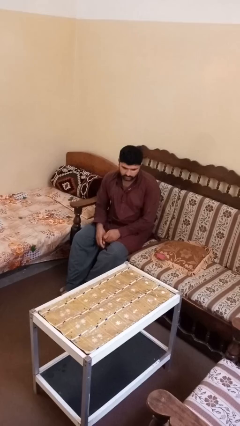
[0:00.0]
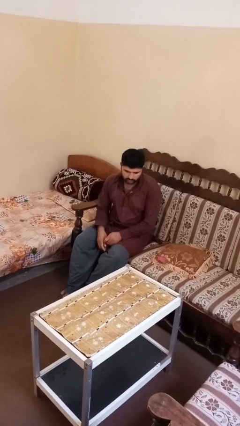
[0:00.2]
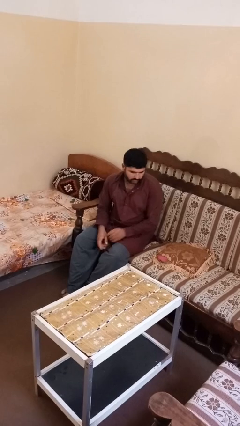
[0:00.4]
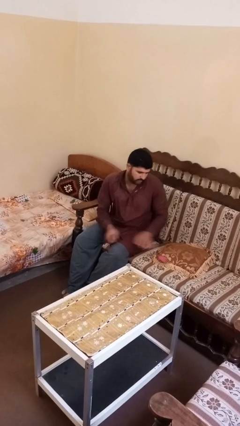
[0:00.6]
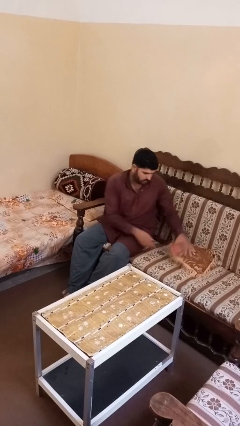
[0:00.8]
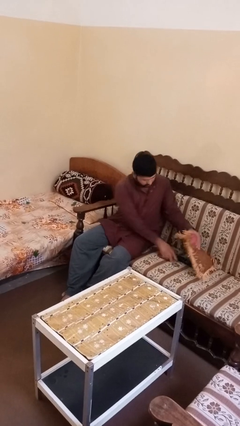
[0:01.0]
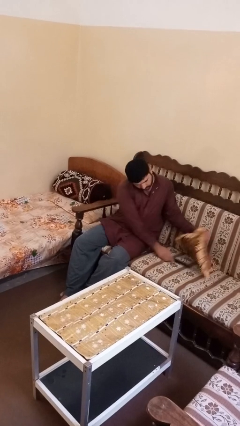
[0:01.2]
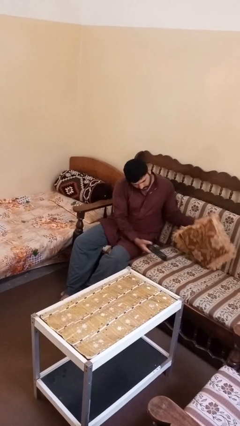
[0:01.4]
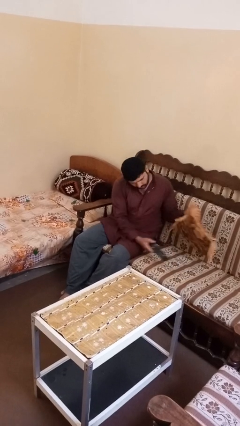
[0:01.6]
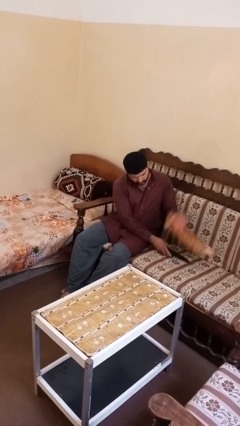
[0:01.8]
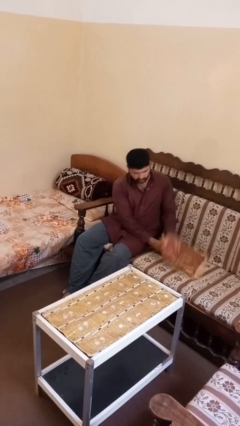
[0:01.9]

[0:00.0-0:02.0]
person searches in couch

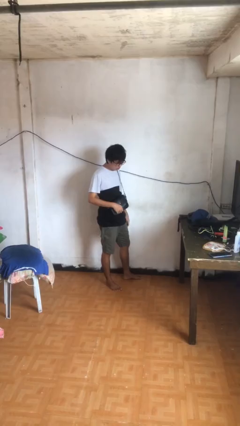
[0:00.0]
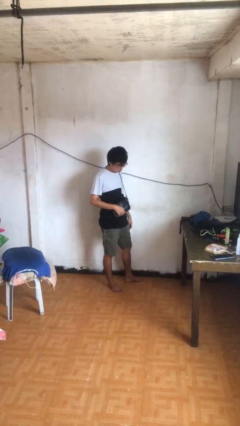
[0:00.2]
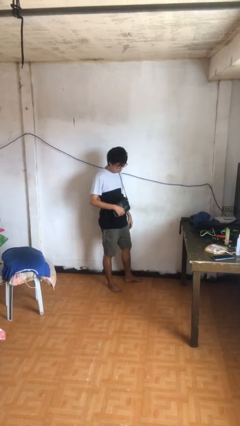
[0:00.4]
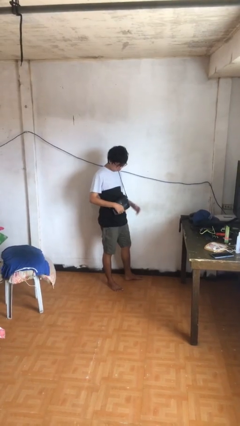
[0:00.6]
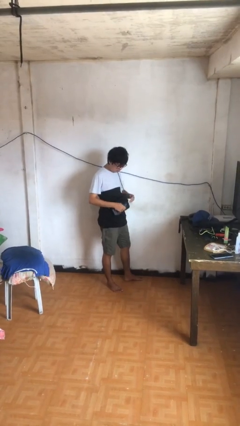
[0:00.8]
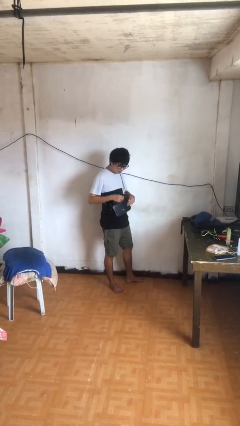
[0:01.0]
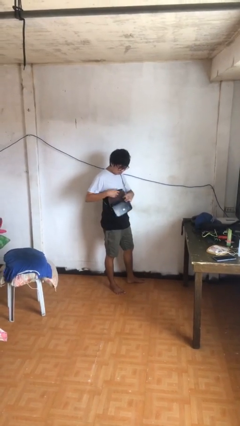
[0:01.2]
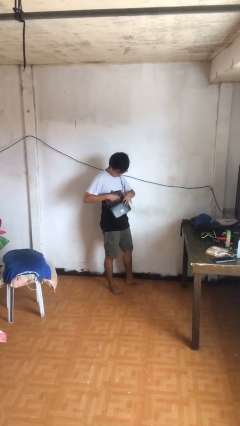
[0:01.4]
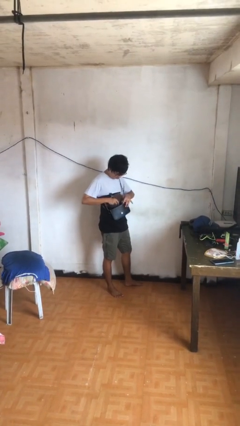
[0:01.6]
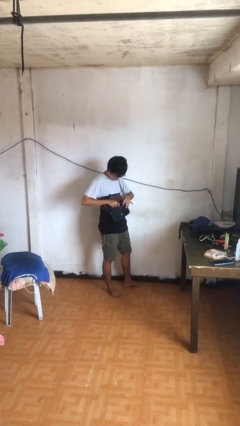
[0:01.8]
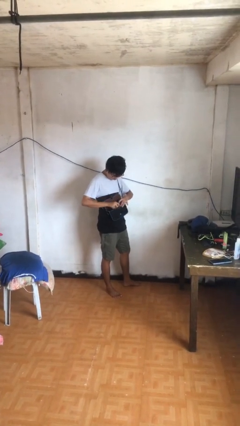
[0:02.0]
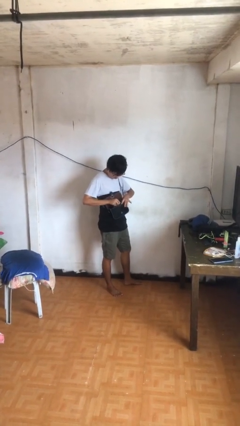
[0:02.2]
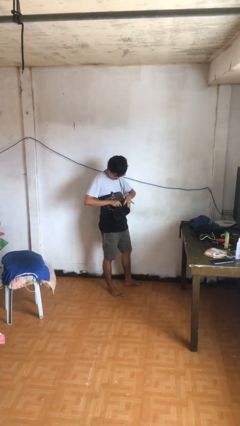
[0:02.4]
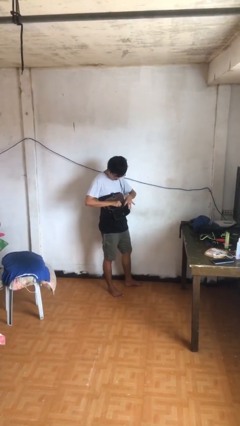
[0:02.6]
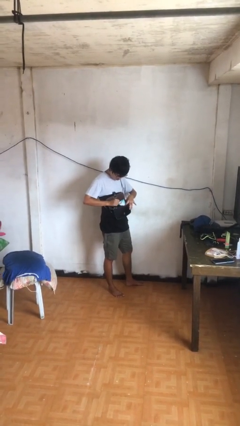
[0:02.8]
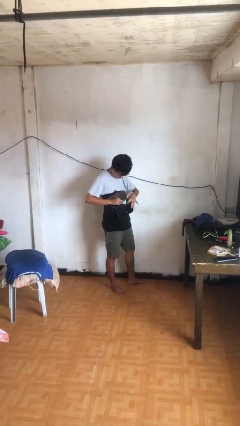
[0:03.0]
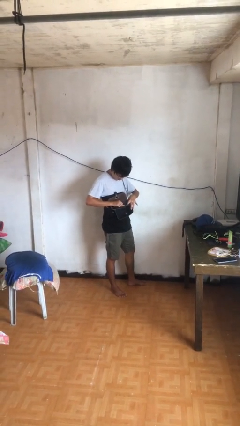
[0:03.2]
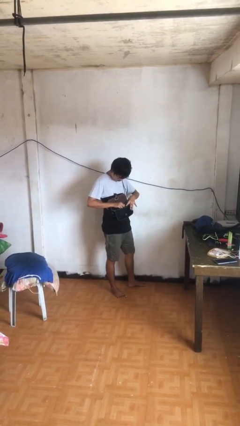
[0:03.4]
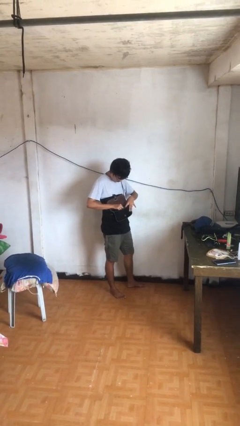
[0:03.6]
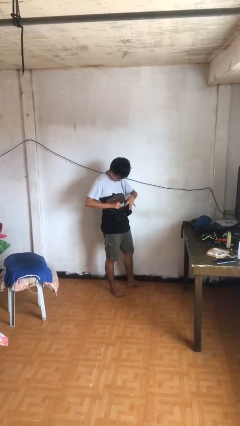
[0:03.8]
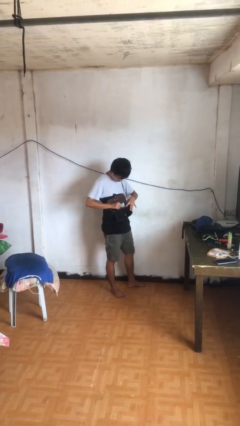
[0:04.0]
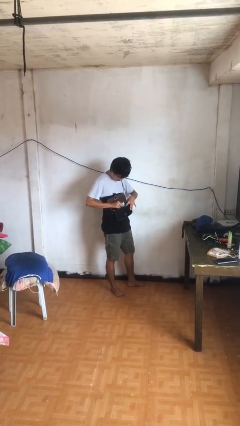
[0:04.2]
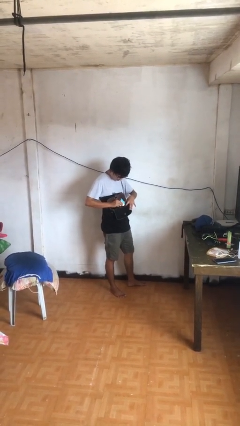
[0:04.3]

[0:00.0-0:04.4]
person searches in purse
